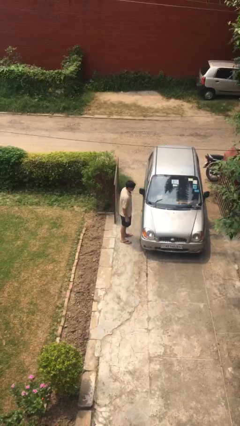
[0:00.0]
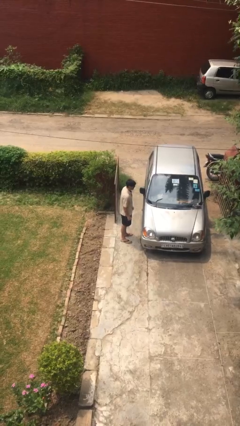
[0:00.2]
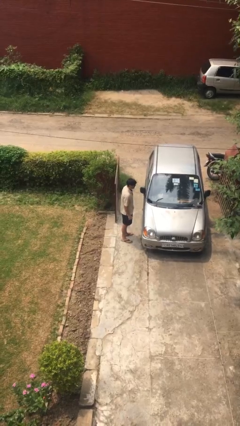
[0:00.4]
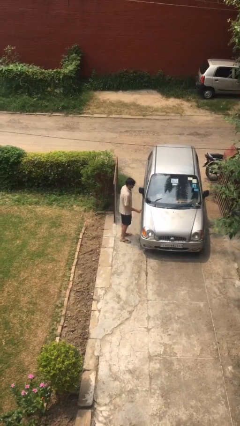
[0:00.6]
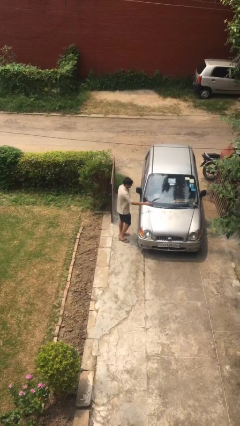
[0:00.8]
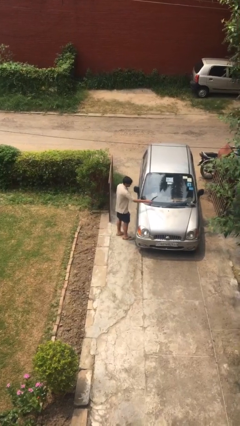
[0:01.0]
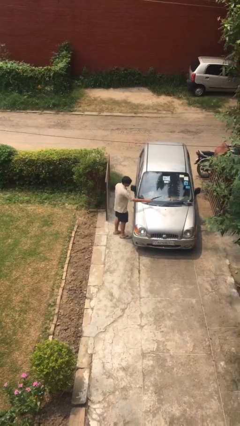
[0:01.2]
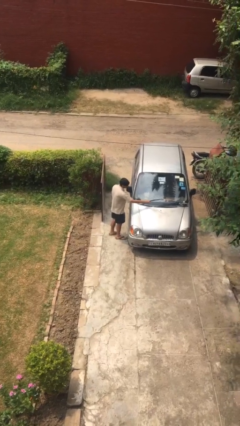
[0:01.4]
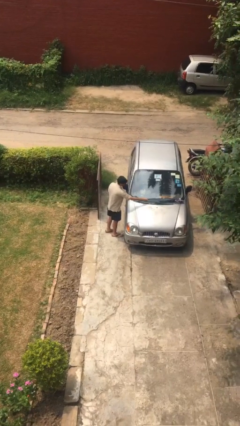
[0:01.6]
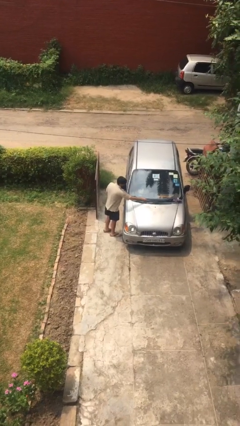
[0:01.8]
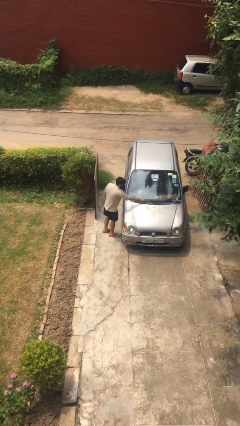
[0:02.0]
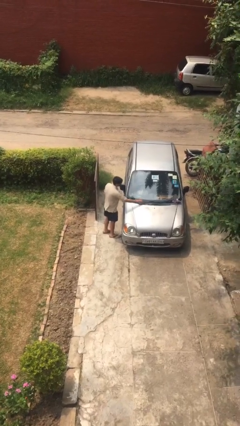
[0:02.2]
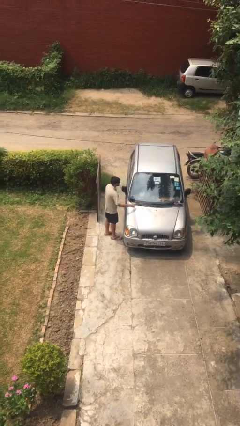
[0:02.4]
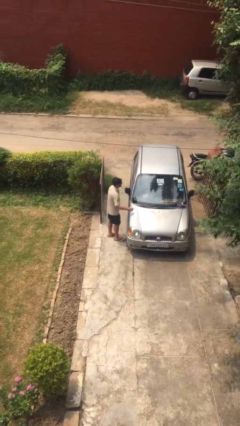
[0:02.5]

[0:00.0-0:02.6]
person flips down car wipers

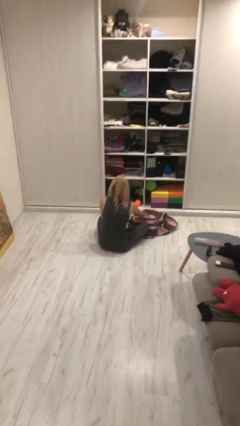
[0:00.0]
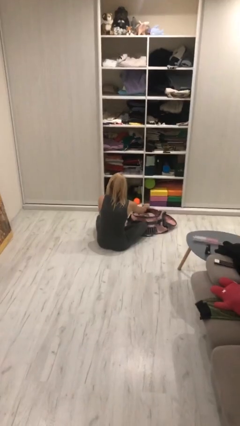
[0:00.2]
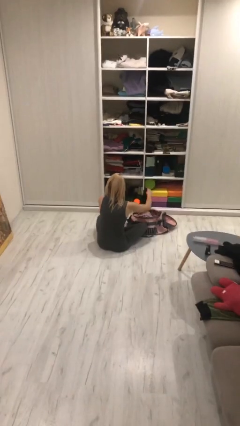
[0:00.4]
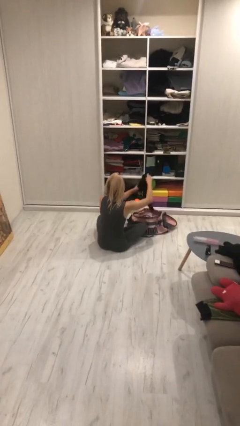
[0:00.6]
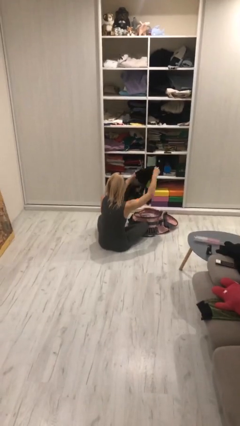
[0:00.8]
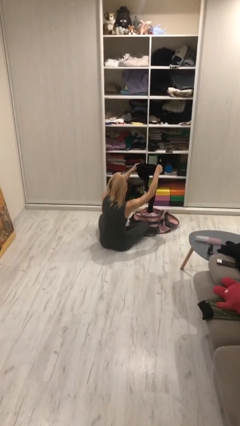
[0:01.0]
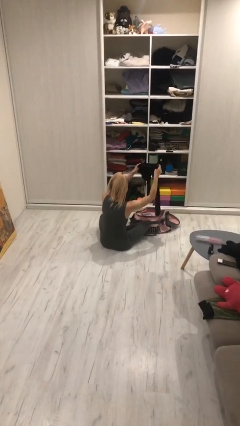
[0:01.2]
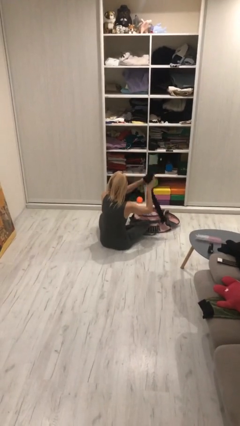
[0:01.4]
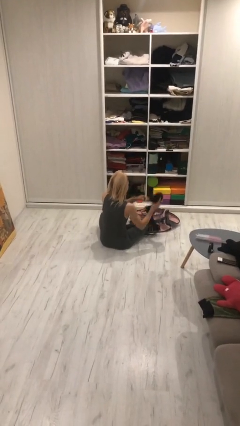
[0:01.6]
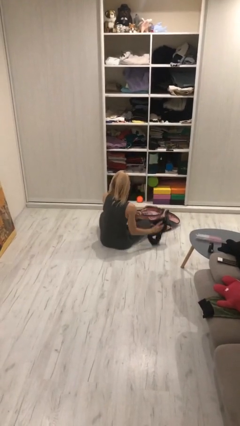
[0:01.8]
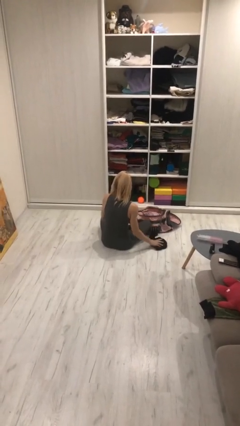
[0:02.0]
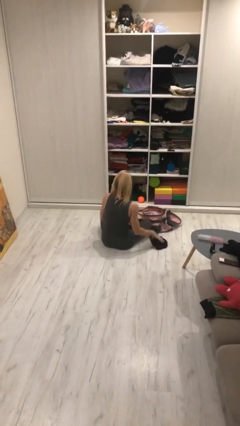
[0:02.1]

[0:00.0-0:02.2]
person unloads clothes from suitcase

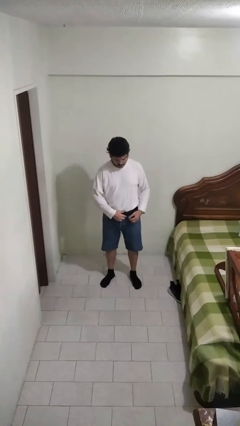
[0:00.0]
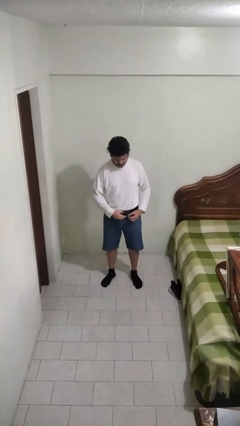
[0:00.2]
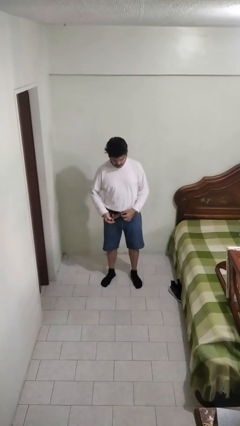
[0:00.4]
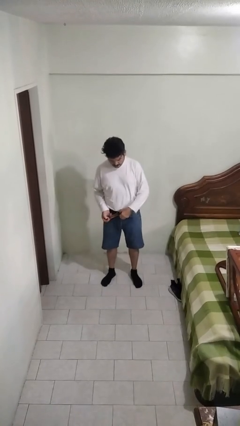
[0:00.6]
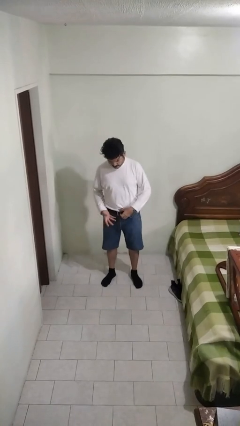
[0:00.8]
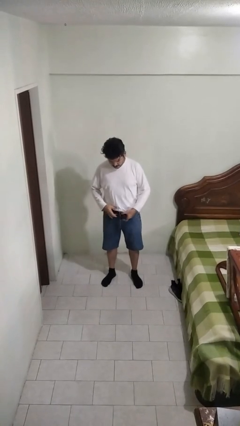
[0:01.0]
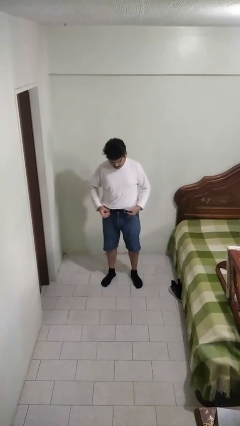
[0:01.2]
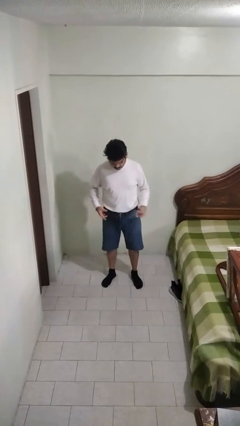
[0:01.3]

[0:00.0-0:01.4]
person takes off belt

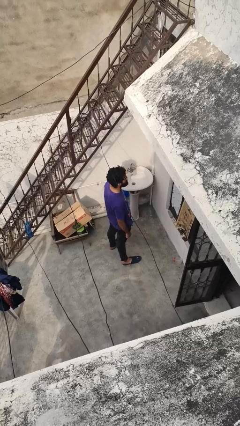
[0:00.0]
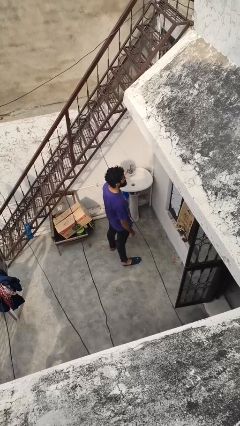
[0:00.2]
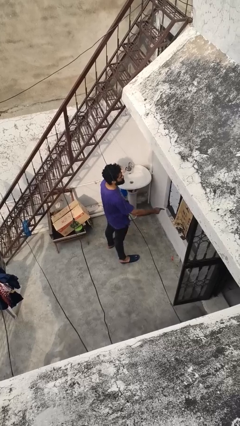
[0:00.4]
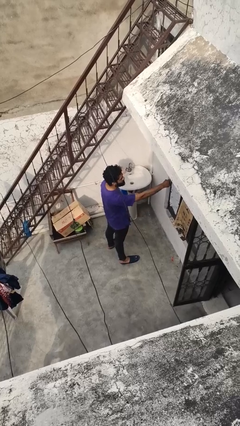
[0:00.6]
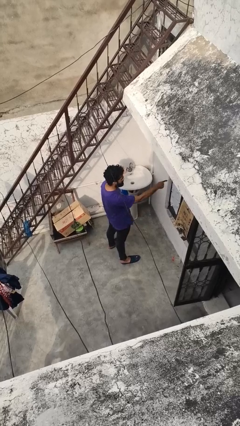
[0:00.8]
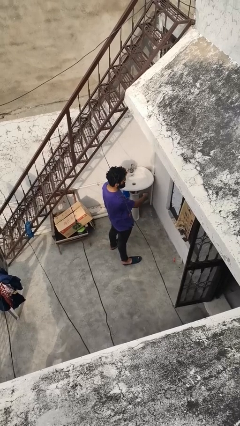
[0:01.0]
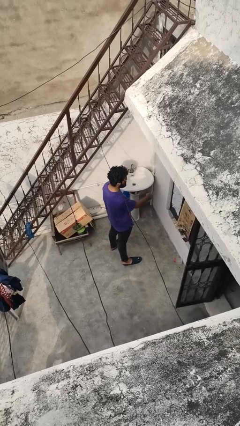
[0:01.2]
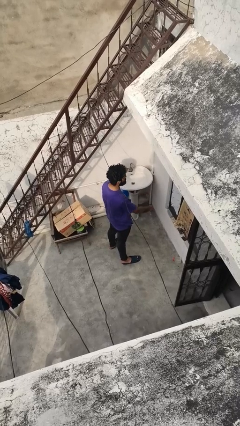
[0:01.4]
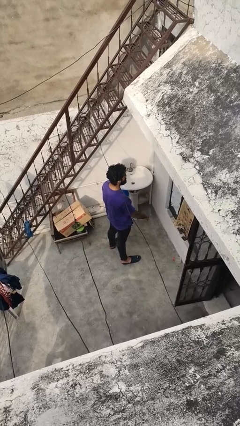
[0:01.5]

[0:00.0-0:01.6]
person gestures behind me

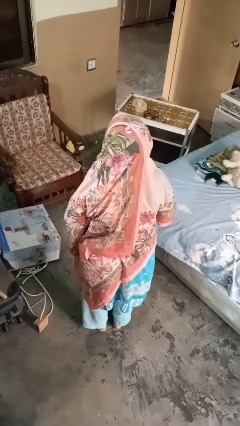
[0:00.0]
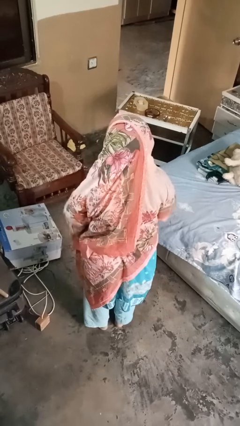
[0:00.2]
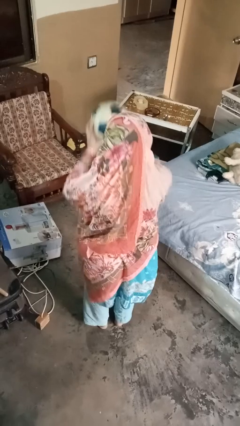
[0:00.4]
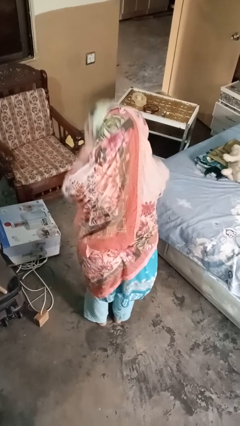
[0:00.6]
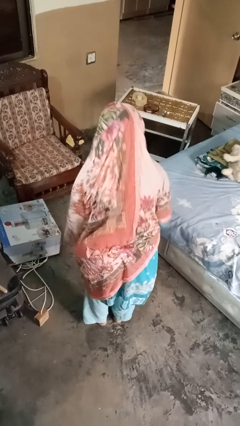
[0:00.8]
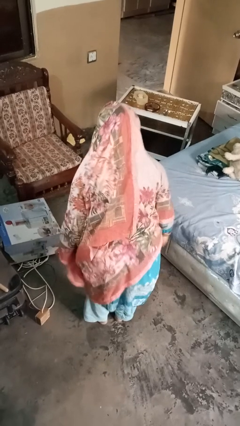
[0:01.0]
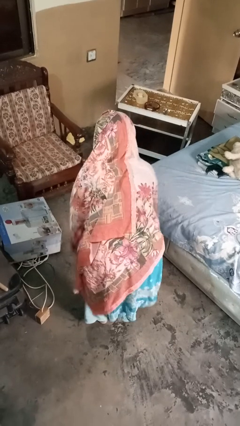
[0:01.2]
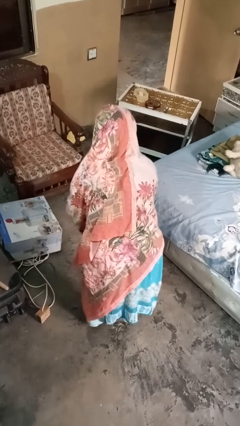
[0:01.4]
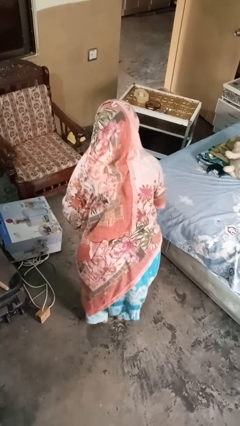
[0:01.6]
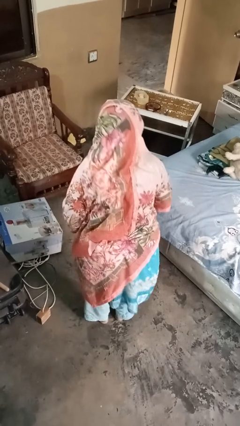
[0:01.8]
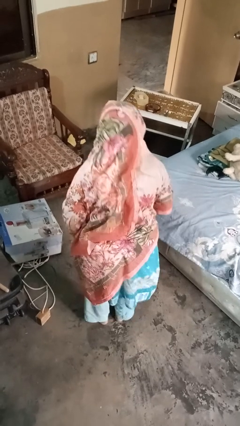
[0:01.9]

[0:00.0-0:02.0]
person bounces ball on floor

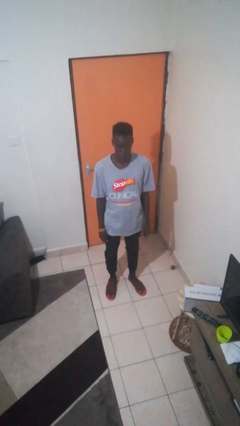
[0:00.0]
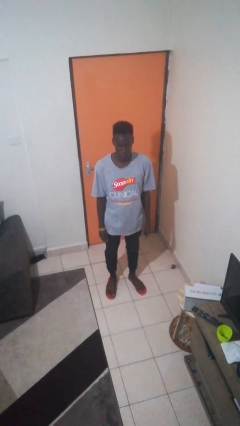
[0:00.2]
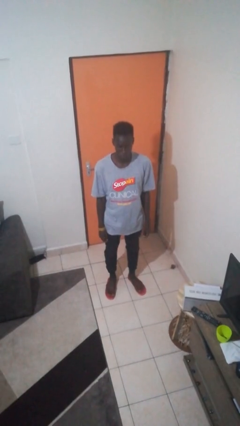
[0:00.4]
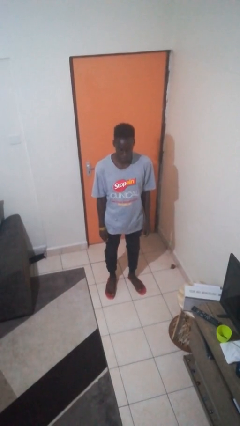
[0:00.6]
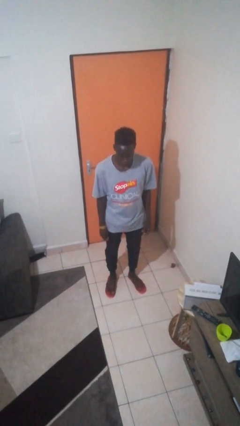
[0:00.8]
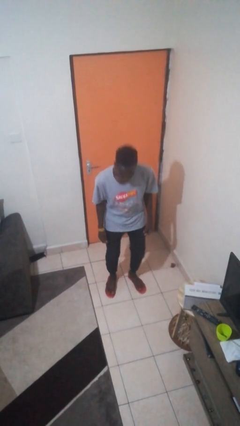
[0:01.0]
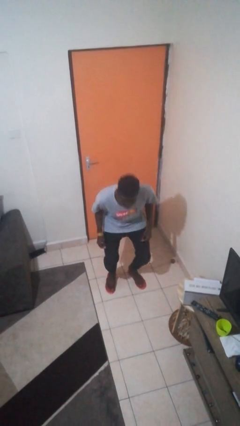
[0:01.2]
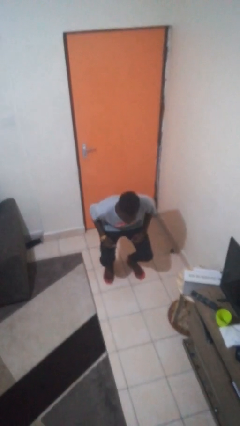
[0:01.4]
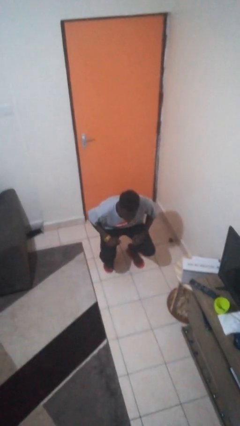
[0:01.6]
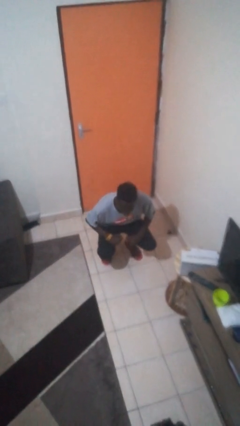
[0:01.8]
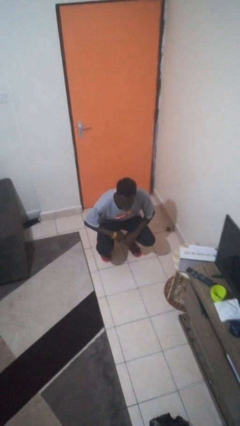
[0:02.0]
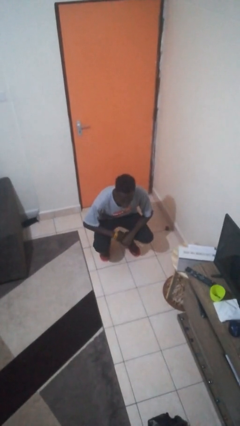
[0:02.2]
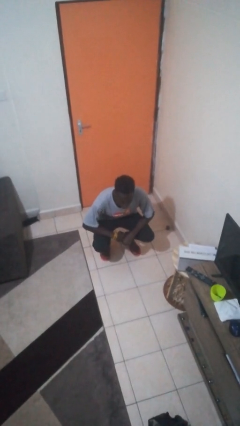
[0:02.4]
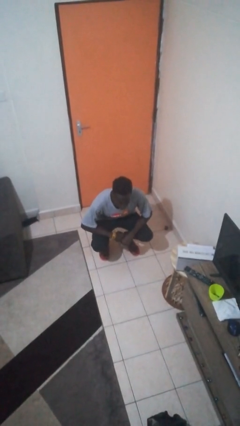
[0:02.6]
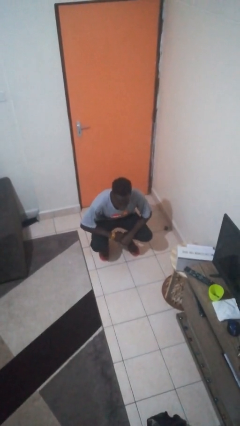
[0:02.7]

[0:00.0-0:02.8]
person squats

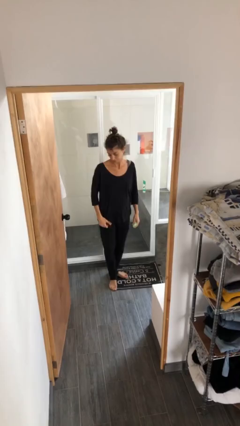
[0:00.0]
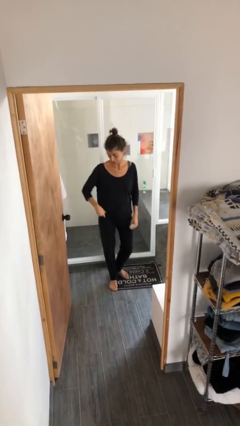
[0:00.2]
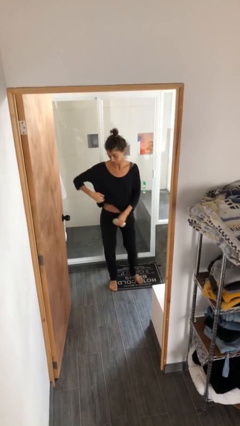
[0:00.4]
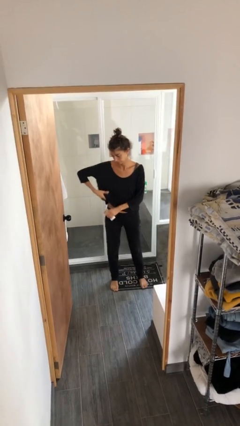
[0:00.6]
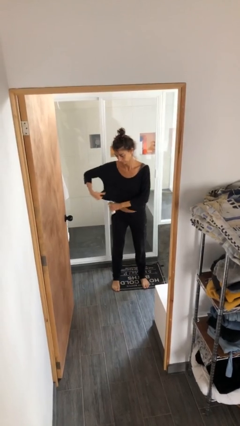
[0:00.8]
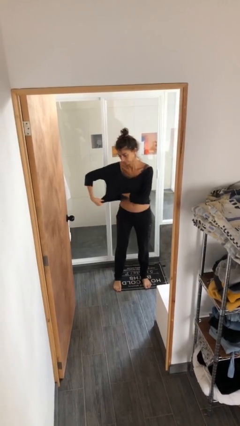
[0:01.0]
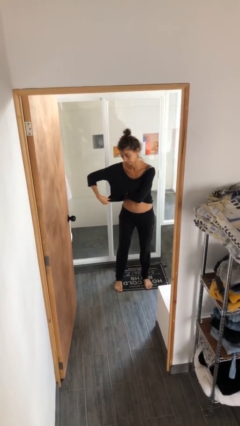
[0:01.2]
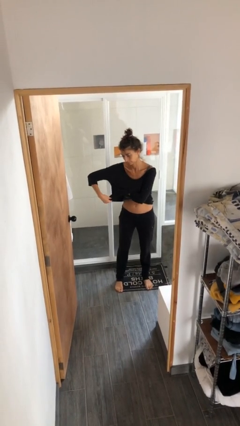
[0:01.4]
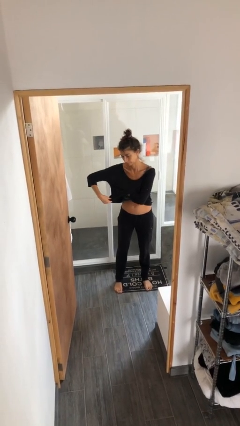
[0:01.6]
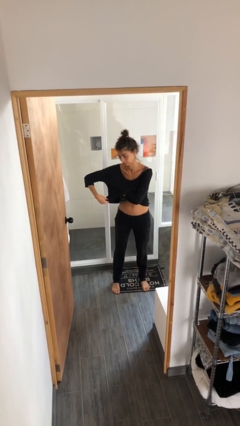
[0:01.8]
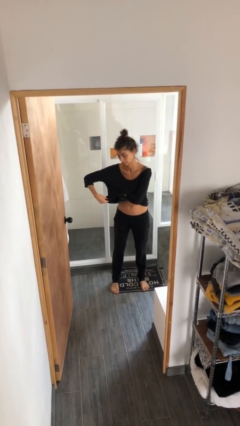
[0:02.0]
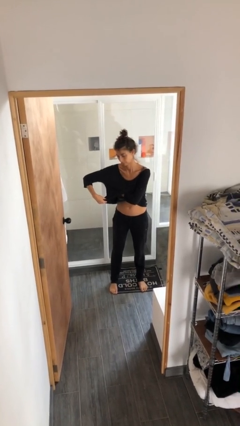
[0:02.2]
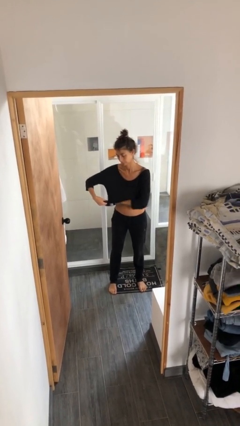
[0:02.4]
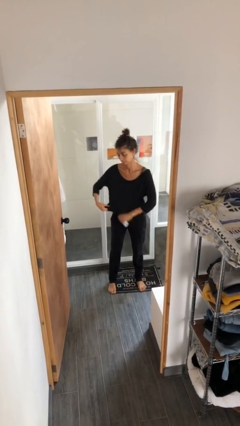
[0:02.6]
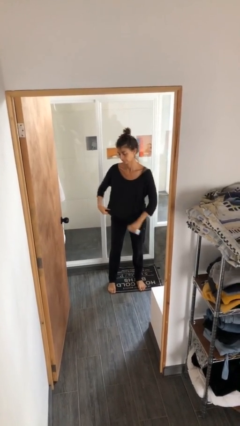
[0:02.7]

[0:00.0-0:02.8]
person applies deodorant

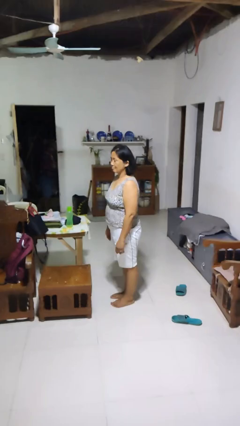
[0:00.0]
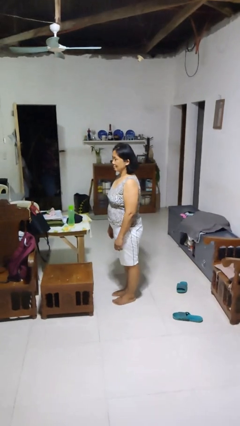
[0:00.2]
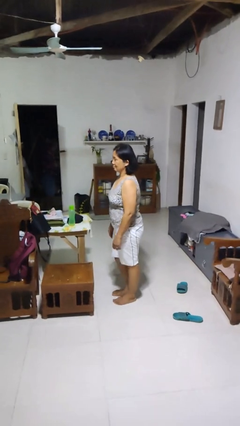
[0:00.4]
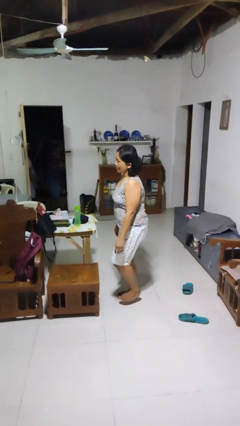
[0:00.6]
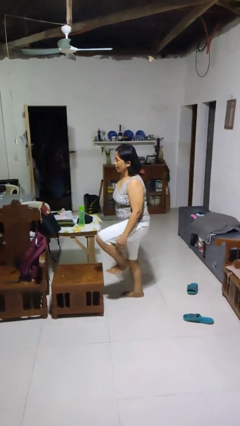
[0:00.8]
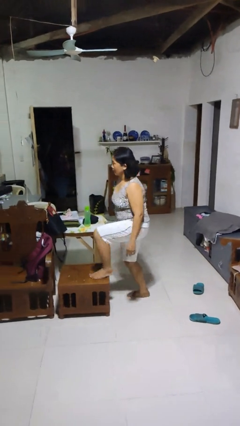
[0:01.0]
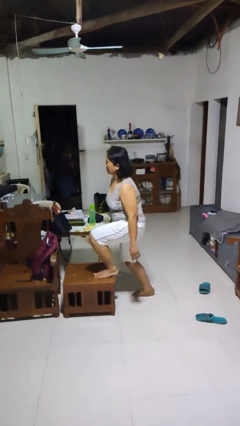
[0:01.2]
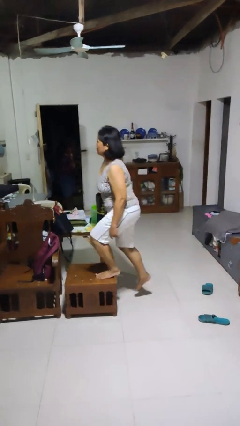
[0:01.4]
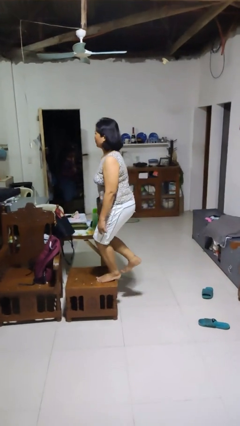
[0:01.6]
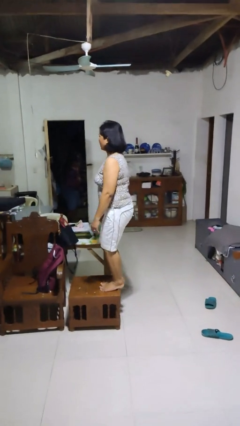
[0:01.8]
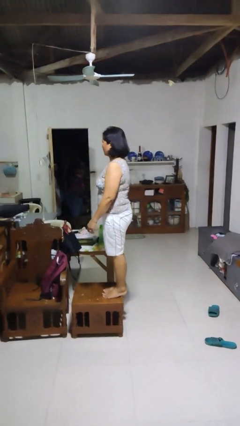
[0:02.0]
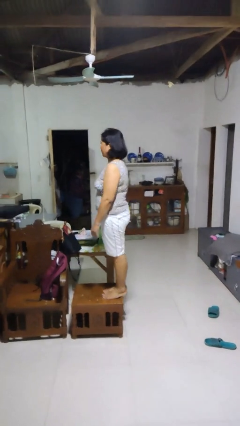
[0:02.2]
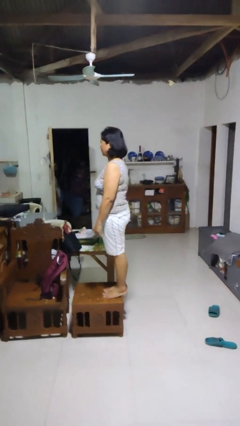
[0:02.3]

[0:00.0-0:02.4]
person climbs on chair
